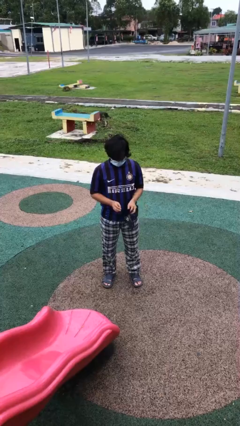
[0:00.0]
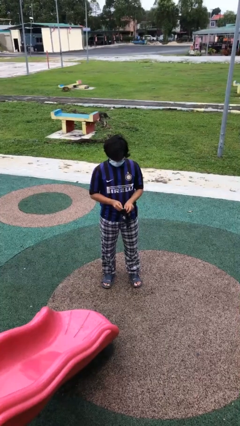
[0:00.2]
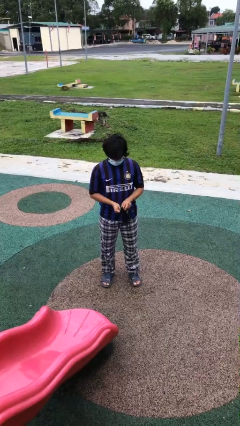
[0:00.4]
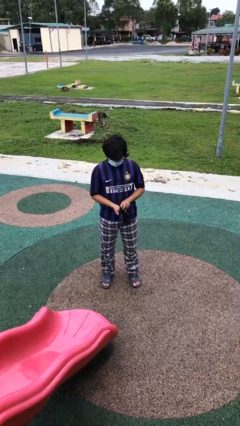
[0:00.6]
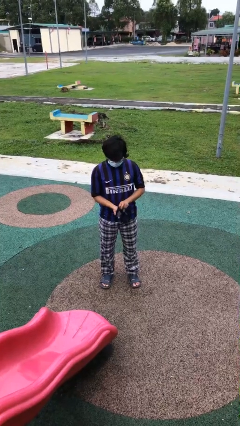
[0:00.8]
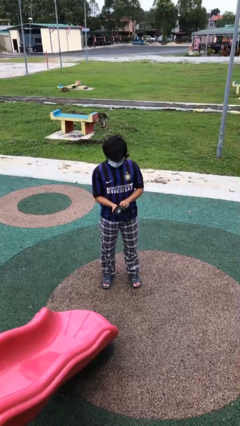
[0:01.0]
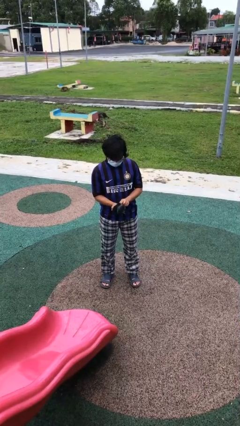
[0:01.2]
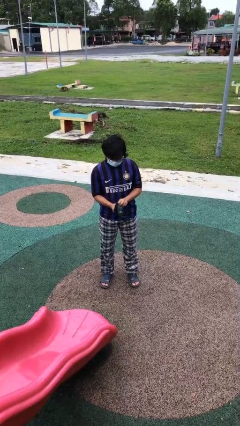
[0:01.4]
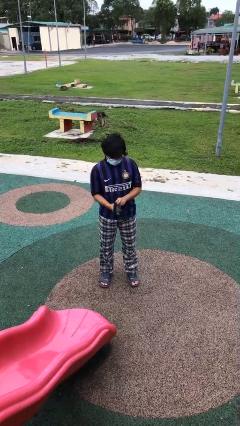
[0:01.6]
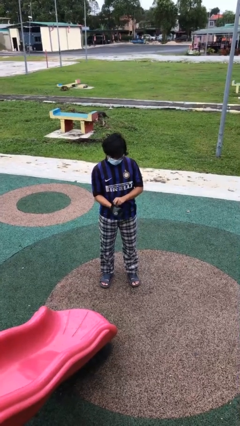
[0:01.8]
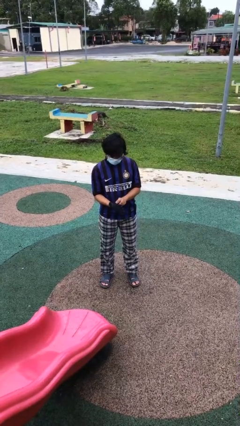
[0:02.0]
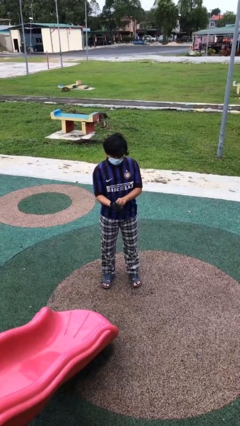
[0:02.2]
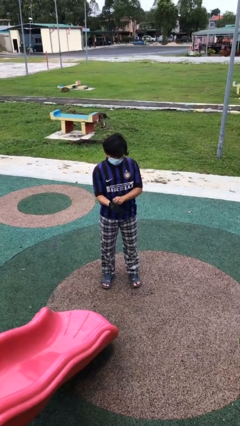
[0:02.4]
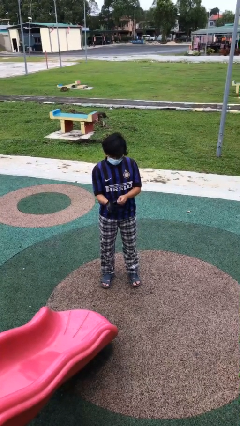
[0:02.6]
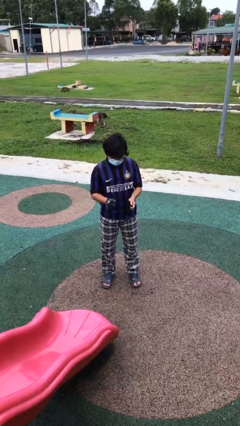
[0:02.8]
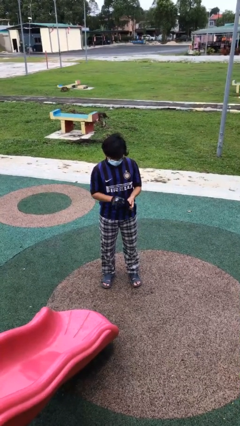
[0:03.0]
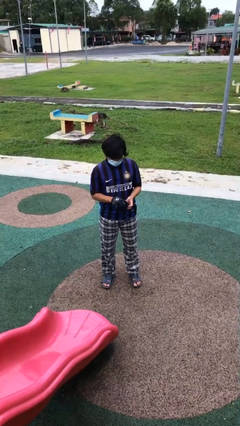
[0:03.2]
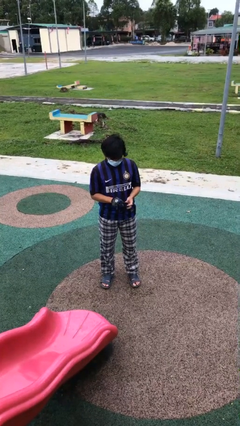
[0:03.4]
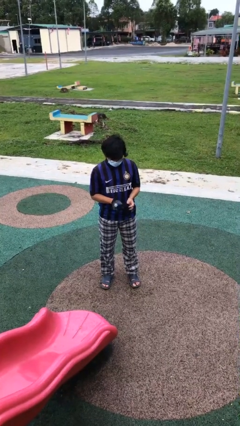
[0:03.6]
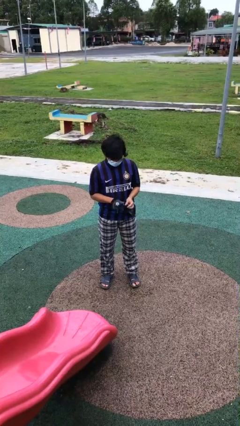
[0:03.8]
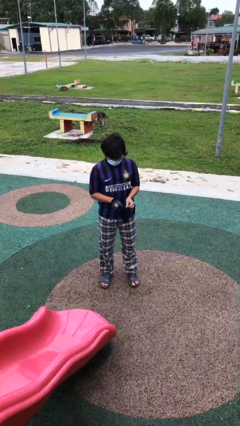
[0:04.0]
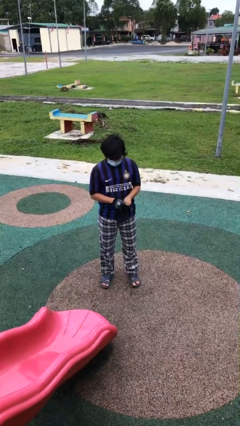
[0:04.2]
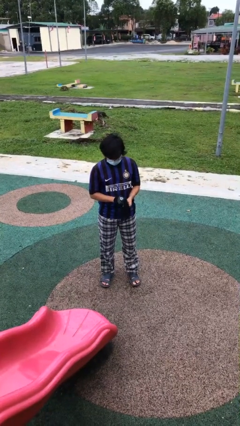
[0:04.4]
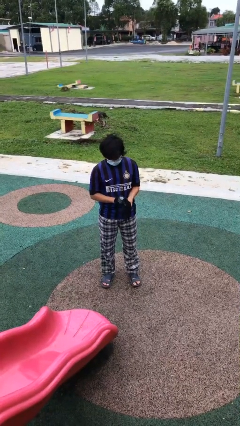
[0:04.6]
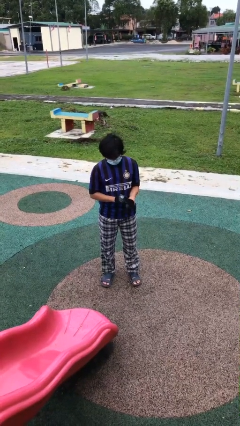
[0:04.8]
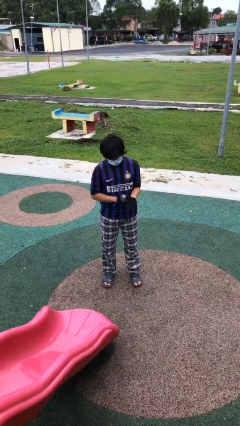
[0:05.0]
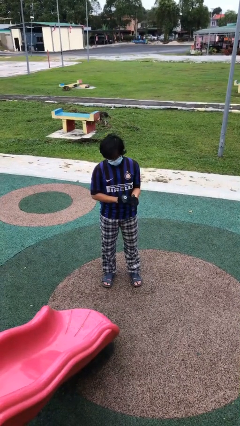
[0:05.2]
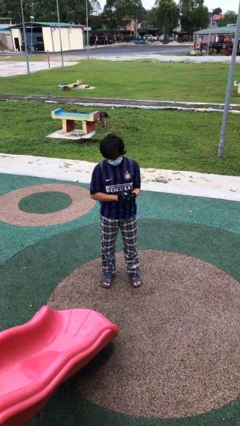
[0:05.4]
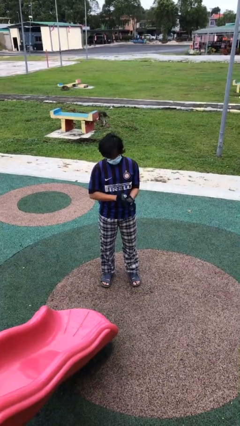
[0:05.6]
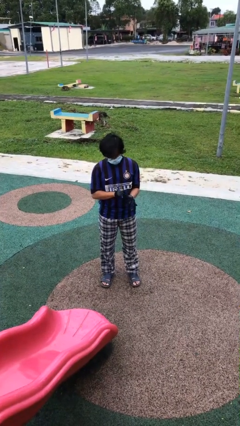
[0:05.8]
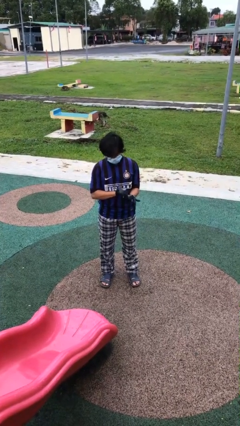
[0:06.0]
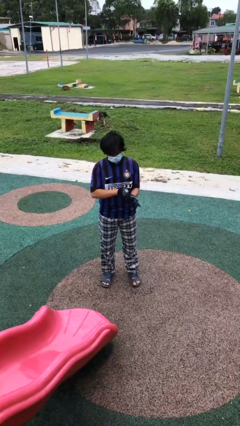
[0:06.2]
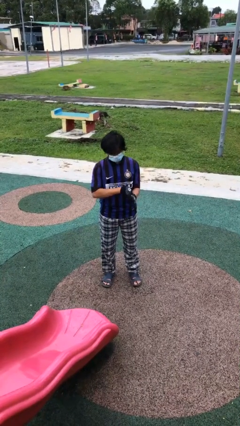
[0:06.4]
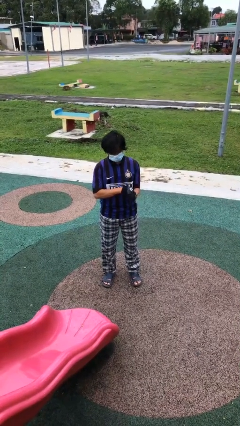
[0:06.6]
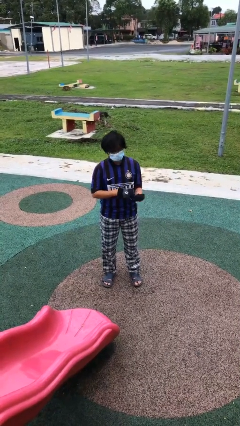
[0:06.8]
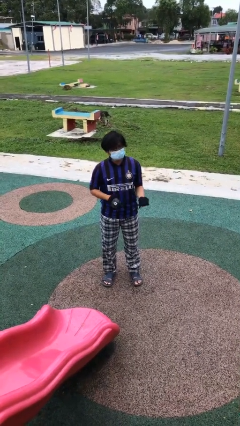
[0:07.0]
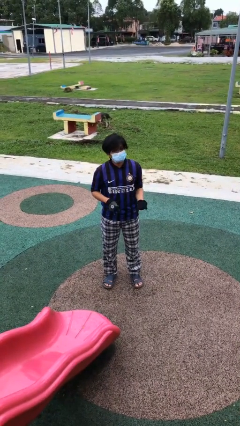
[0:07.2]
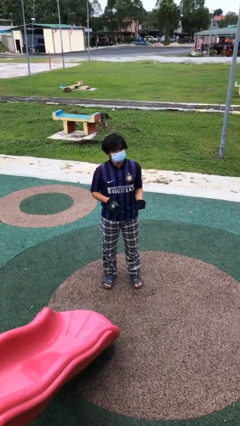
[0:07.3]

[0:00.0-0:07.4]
person puts on gloves

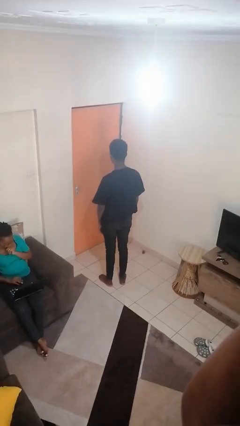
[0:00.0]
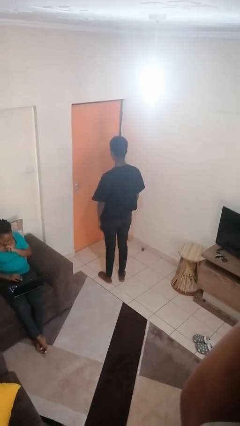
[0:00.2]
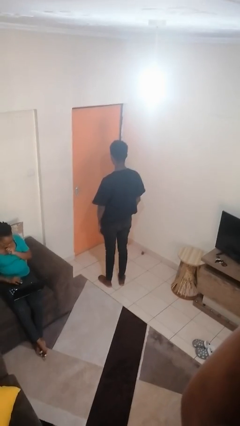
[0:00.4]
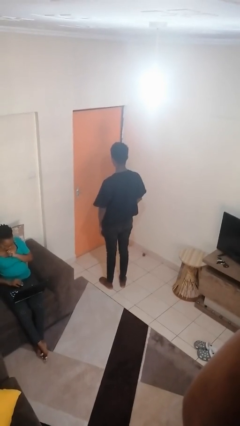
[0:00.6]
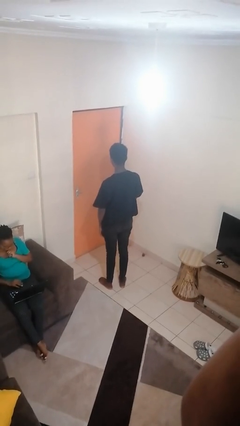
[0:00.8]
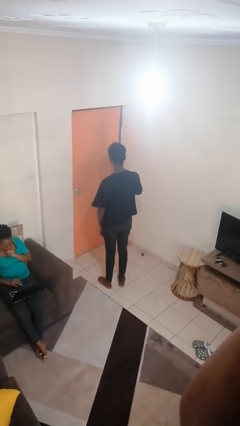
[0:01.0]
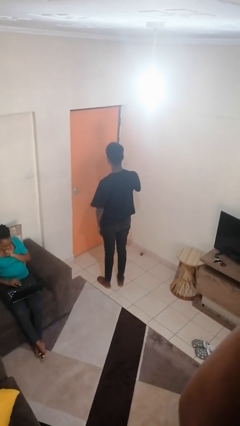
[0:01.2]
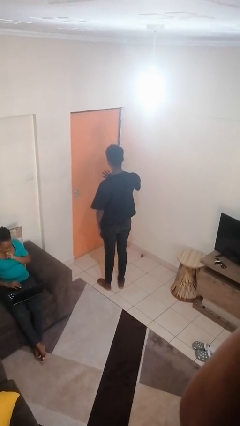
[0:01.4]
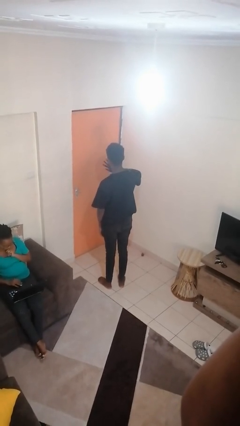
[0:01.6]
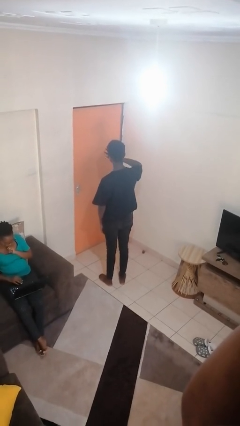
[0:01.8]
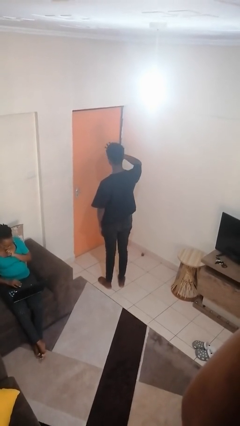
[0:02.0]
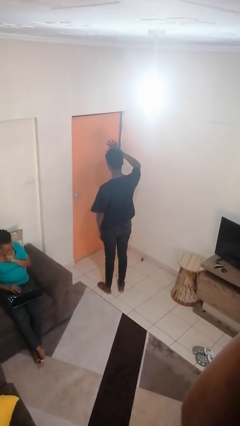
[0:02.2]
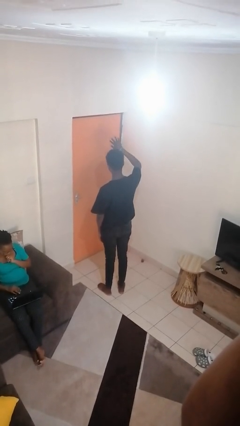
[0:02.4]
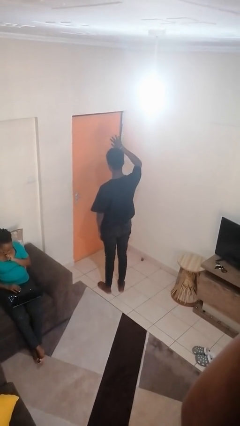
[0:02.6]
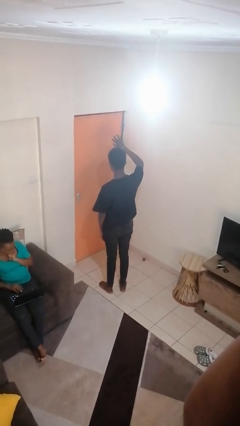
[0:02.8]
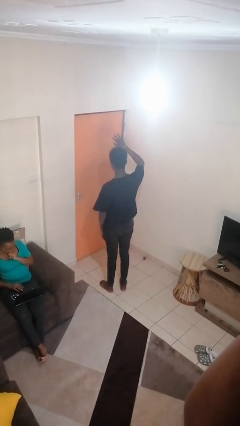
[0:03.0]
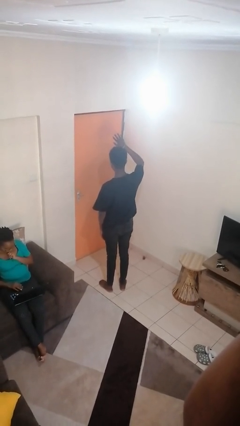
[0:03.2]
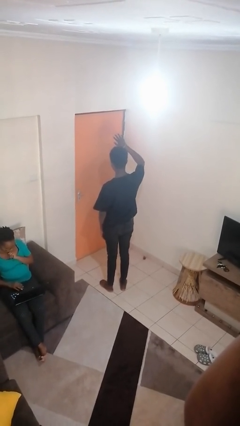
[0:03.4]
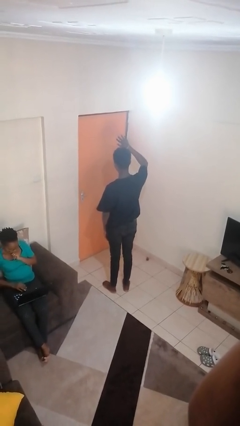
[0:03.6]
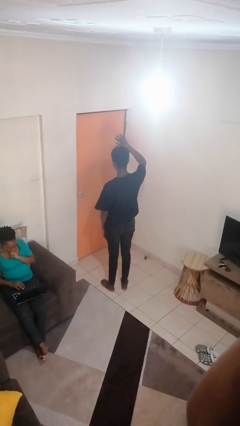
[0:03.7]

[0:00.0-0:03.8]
person gestures swipe up

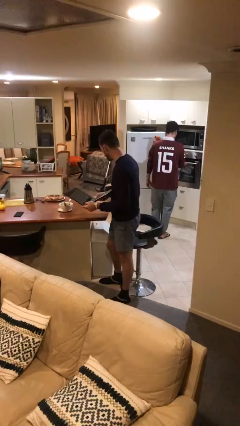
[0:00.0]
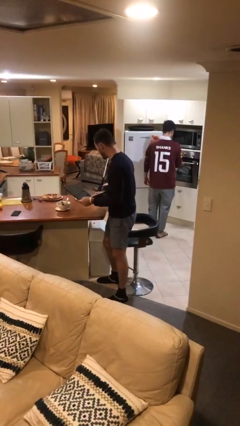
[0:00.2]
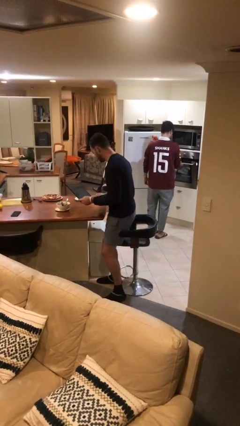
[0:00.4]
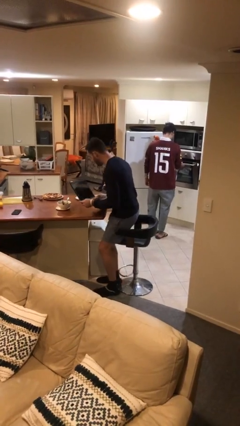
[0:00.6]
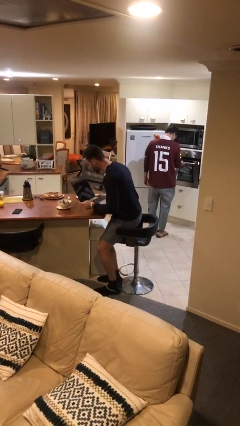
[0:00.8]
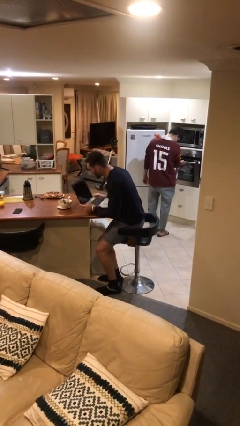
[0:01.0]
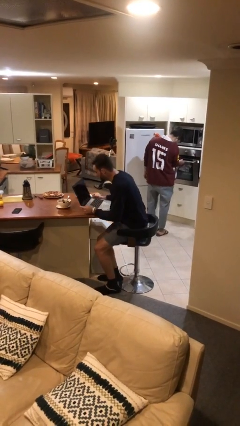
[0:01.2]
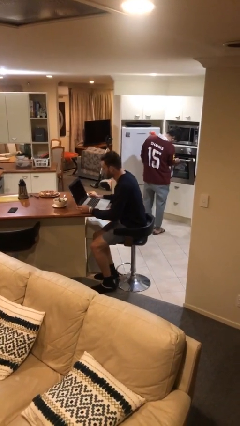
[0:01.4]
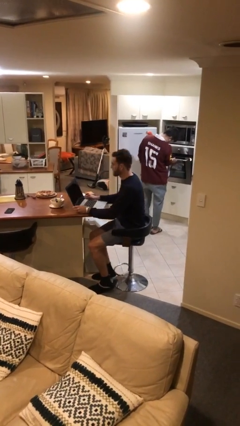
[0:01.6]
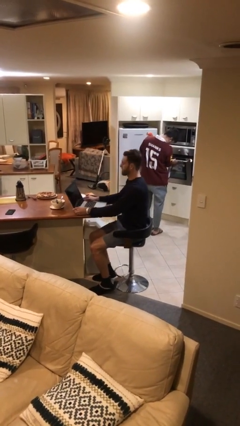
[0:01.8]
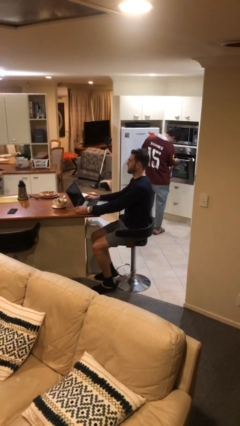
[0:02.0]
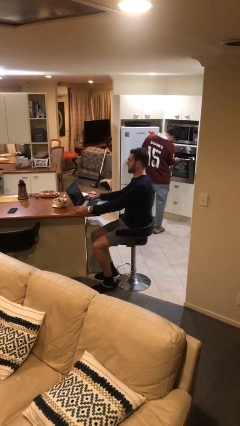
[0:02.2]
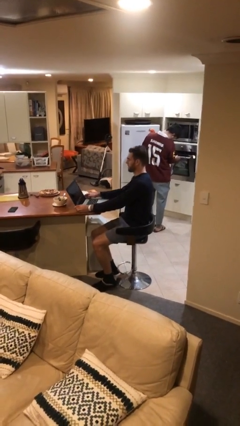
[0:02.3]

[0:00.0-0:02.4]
person sits down

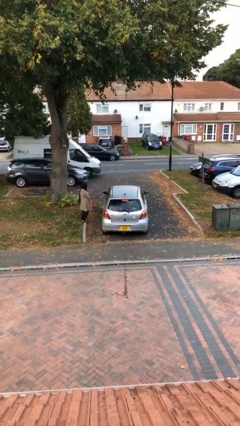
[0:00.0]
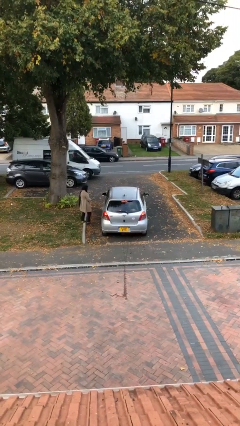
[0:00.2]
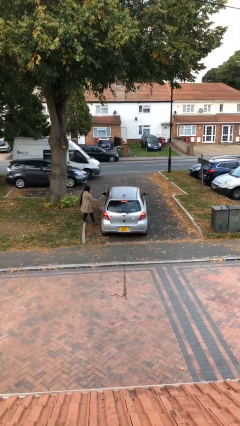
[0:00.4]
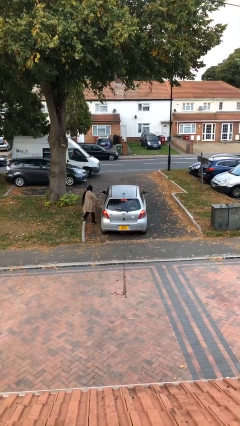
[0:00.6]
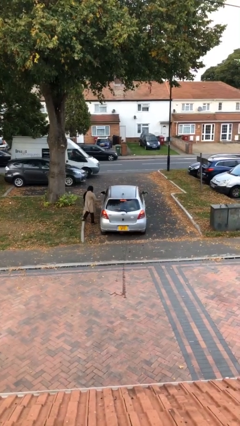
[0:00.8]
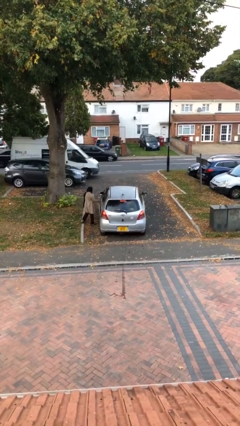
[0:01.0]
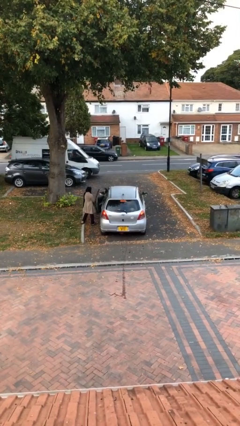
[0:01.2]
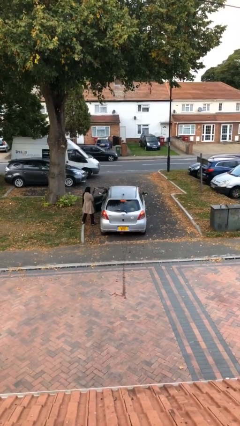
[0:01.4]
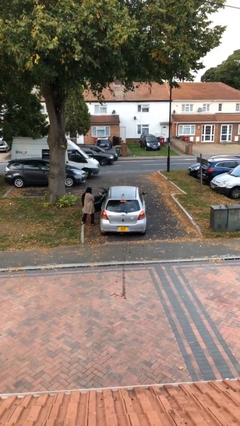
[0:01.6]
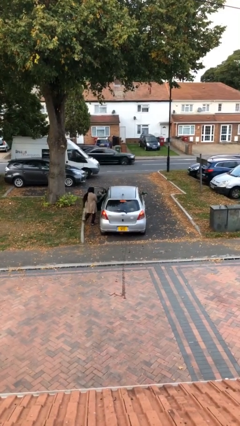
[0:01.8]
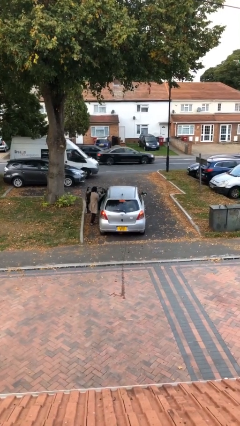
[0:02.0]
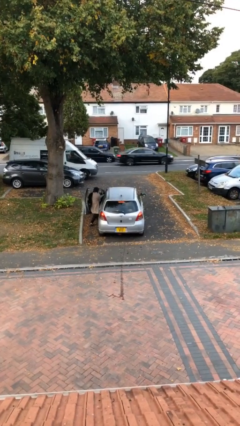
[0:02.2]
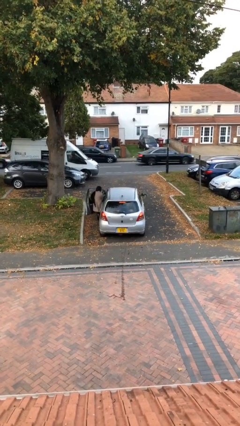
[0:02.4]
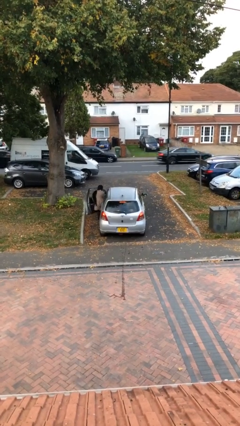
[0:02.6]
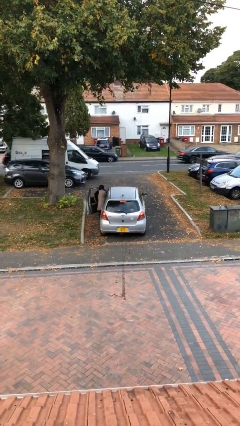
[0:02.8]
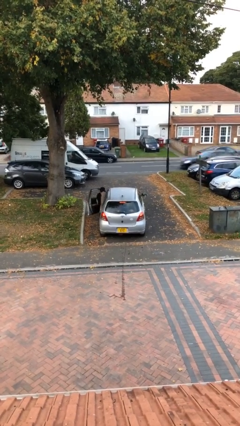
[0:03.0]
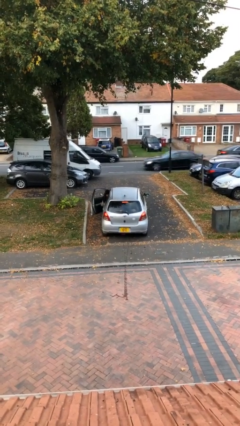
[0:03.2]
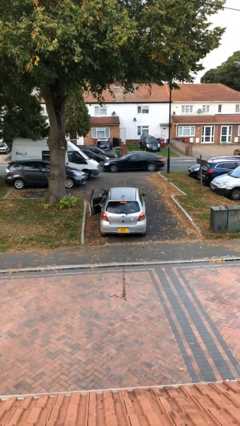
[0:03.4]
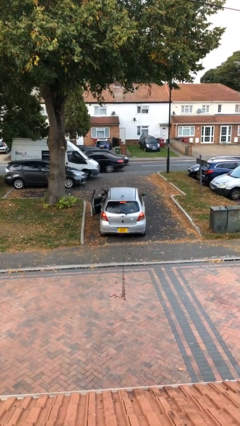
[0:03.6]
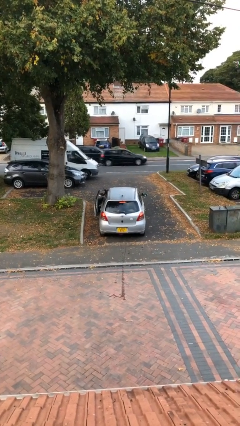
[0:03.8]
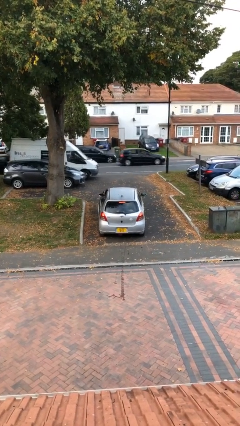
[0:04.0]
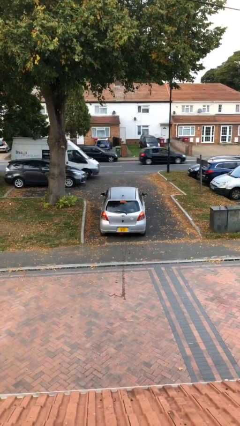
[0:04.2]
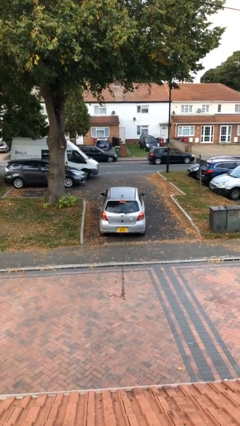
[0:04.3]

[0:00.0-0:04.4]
car picks up person
